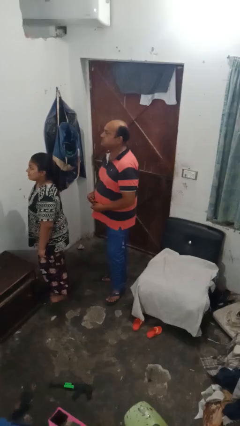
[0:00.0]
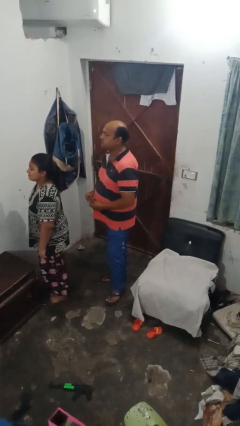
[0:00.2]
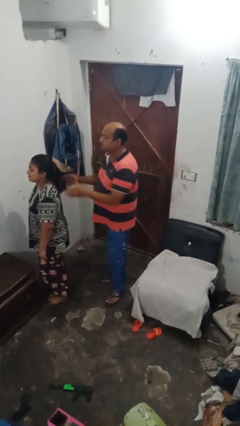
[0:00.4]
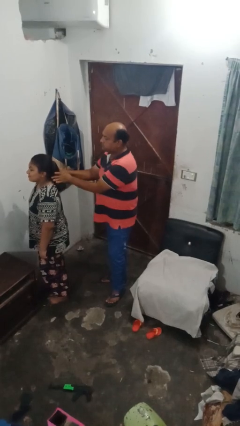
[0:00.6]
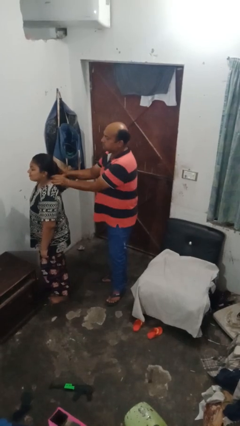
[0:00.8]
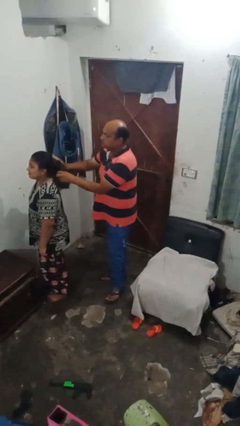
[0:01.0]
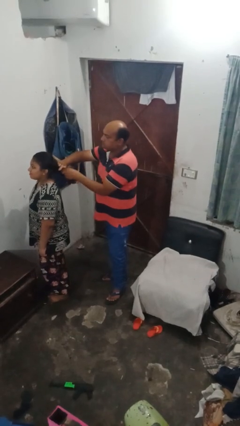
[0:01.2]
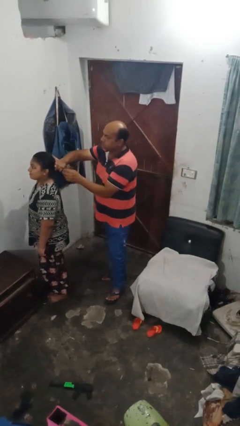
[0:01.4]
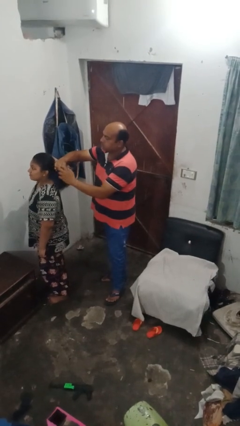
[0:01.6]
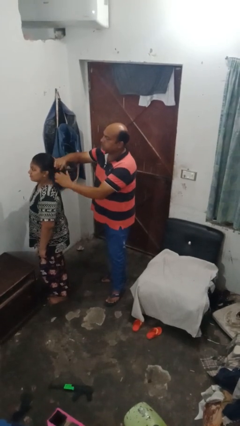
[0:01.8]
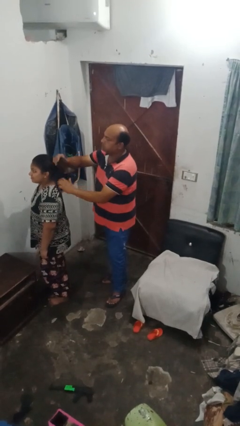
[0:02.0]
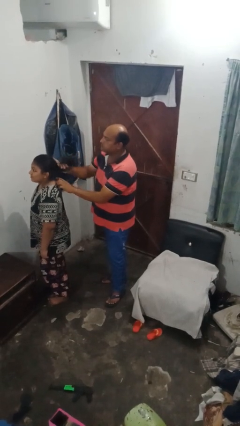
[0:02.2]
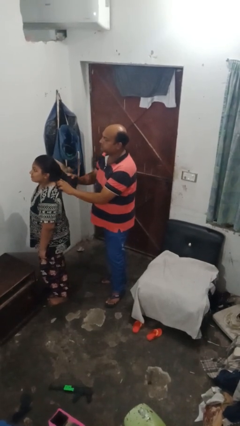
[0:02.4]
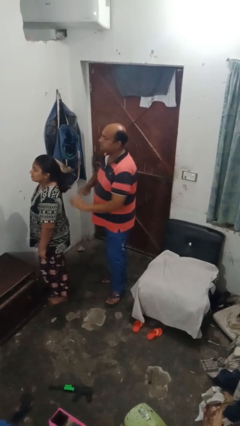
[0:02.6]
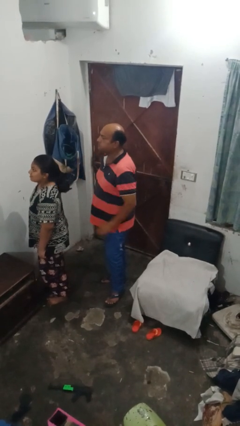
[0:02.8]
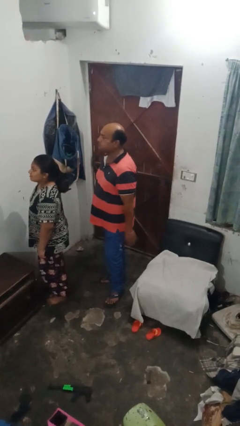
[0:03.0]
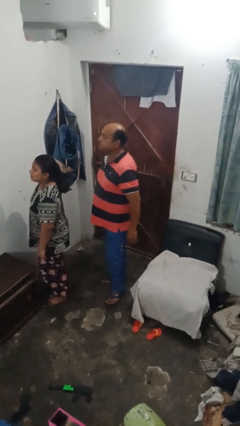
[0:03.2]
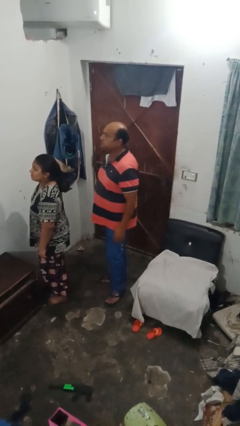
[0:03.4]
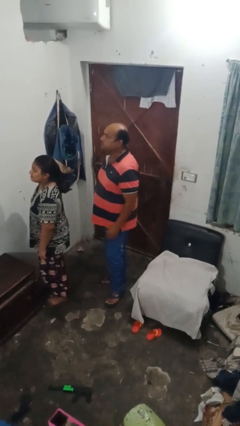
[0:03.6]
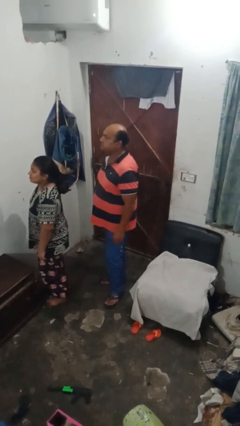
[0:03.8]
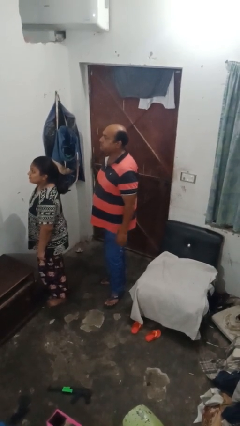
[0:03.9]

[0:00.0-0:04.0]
person braids hair of person

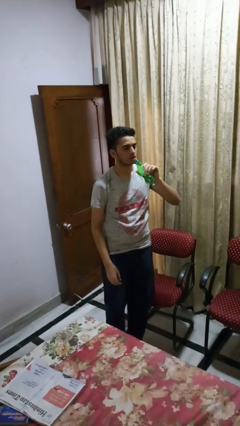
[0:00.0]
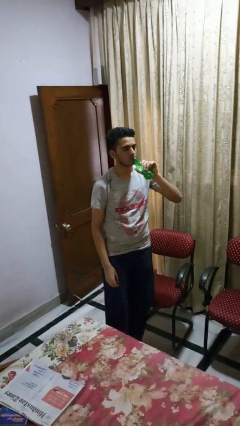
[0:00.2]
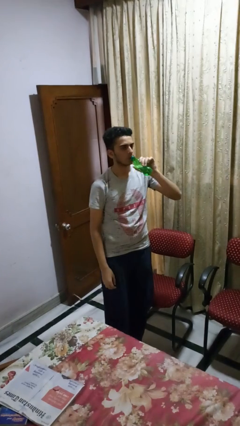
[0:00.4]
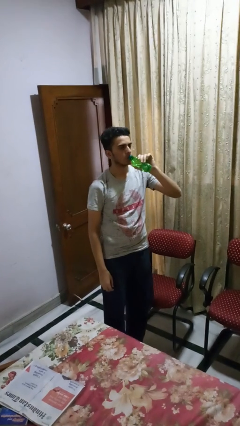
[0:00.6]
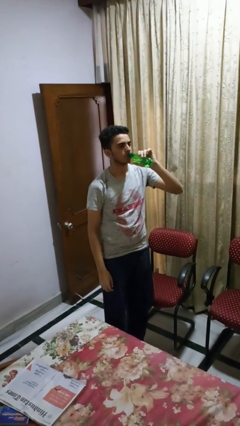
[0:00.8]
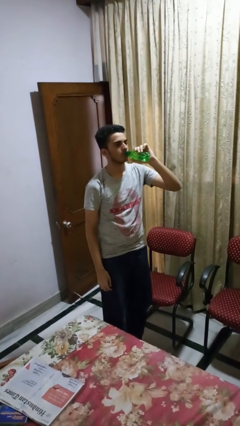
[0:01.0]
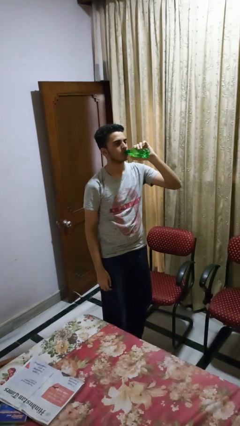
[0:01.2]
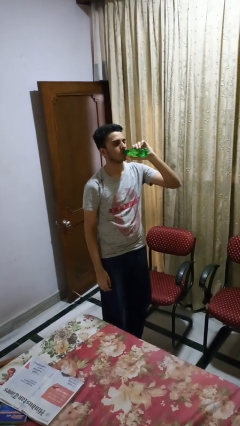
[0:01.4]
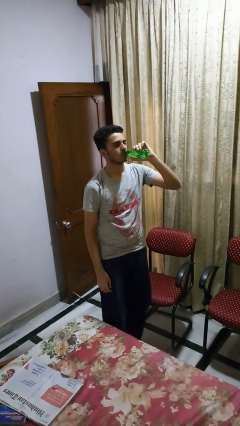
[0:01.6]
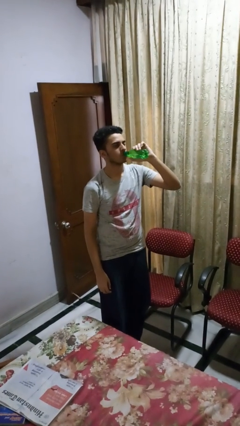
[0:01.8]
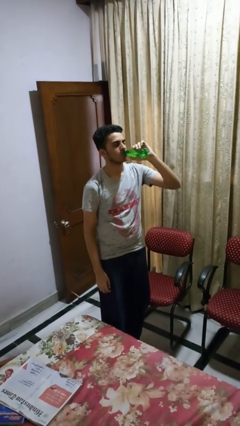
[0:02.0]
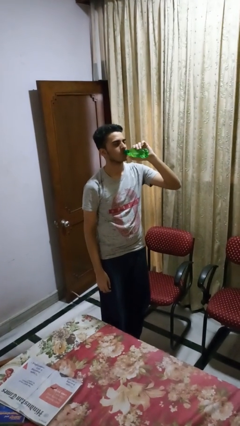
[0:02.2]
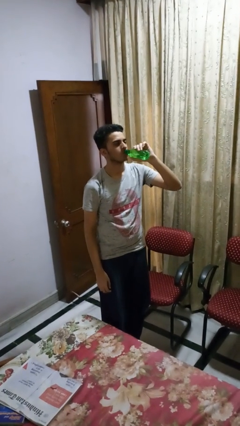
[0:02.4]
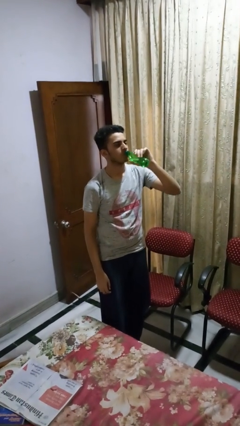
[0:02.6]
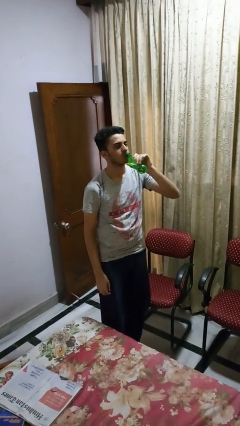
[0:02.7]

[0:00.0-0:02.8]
person drinks from bottle

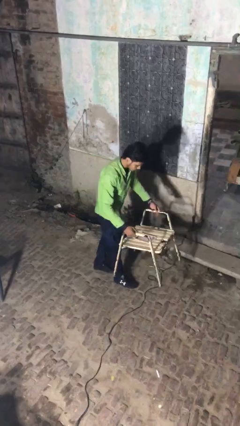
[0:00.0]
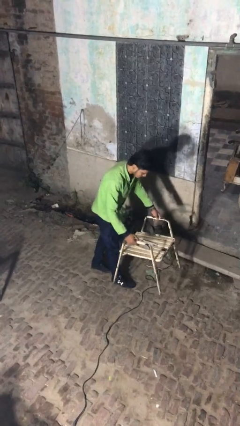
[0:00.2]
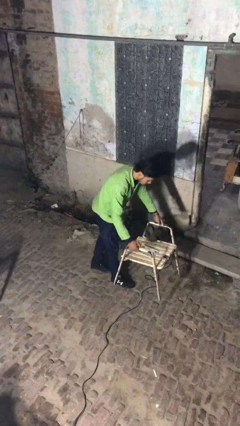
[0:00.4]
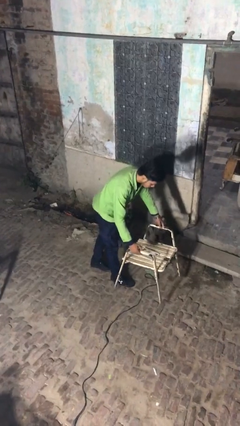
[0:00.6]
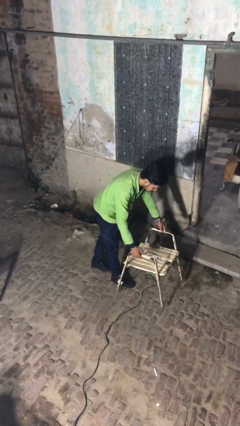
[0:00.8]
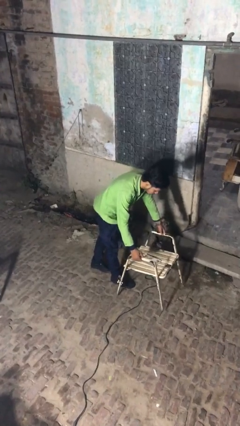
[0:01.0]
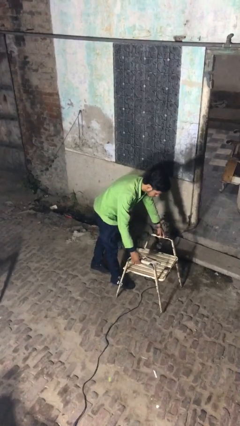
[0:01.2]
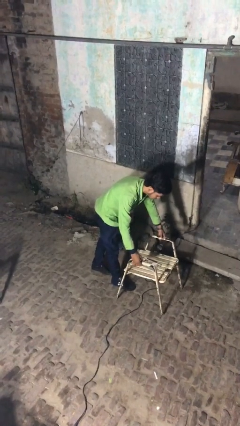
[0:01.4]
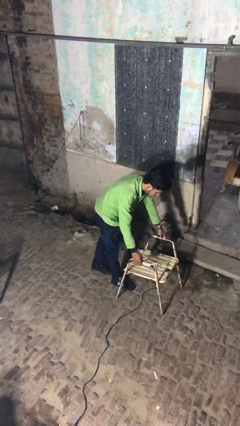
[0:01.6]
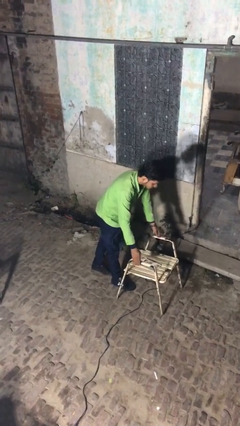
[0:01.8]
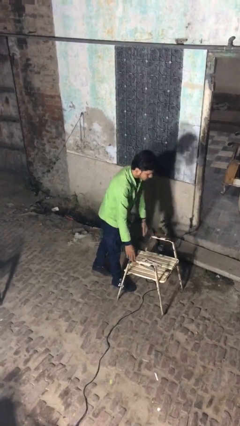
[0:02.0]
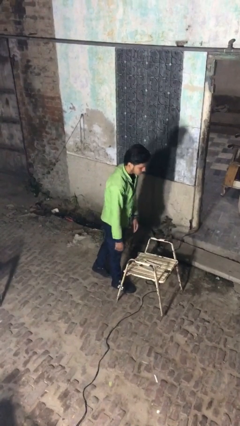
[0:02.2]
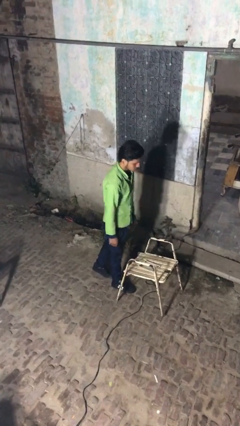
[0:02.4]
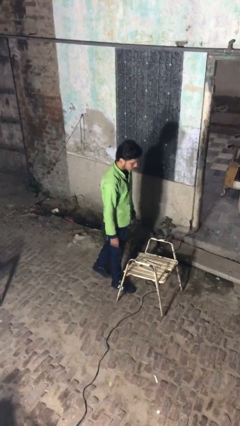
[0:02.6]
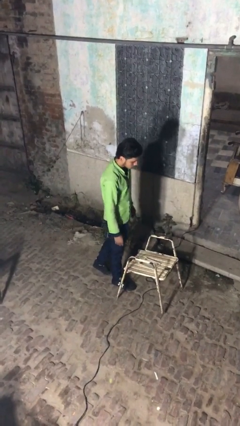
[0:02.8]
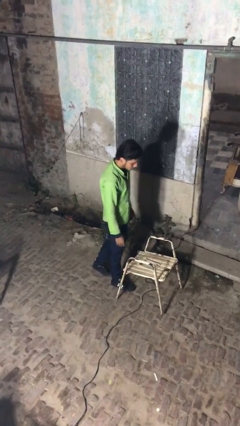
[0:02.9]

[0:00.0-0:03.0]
person puts down object on floor

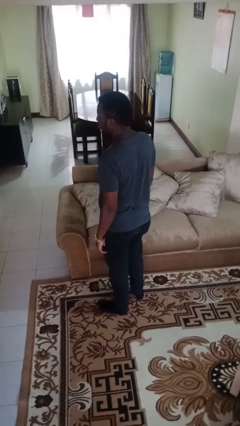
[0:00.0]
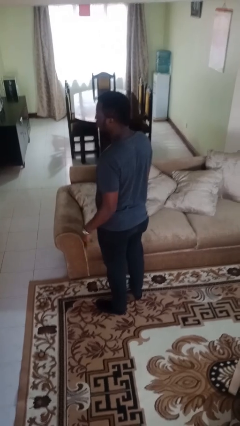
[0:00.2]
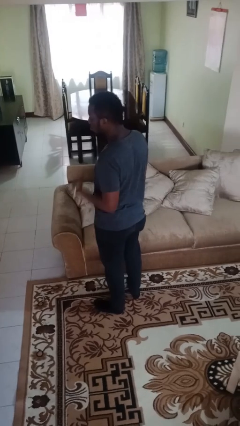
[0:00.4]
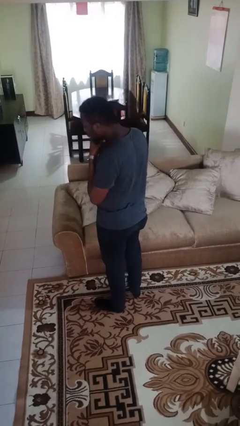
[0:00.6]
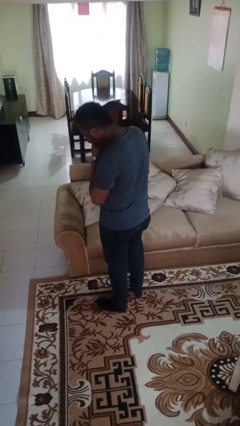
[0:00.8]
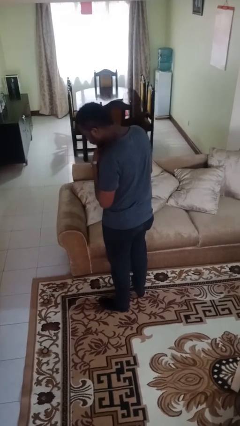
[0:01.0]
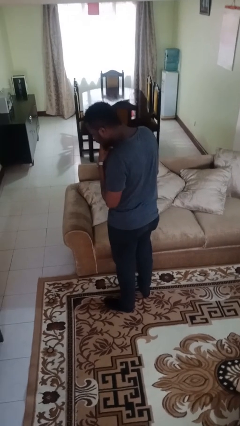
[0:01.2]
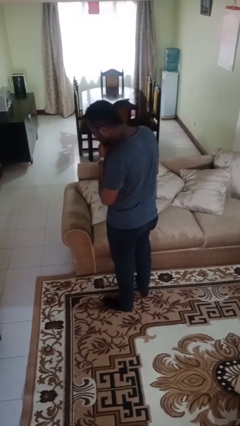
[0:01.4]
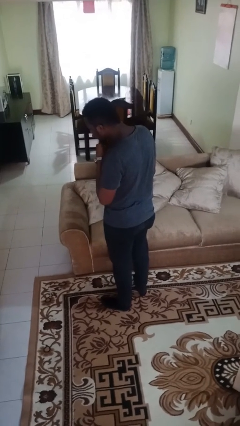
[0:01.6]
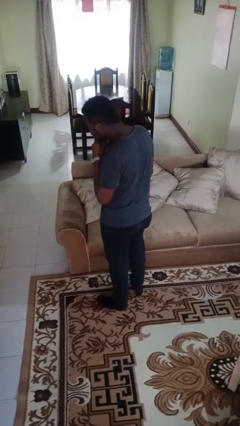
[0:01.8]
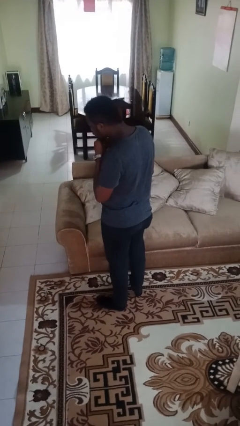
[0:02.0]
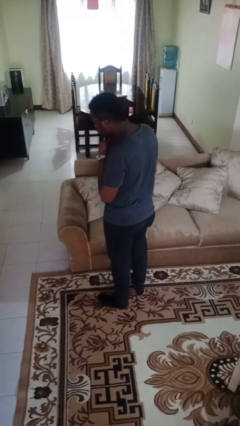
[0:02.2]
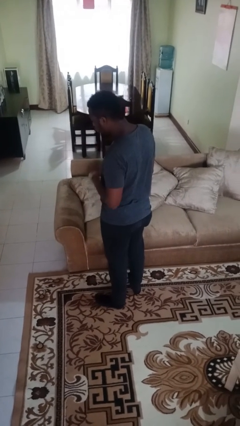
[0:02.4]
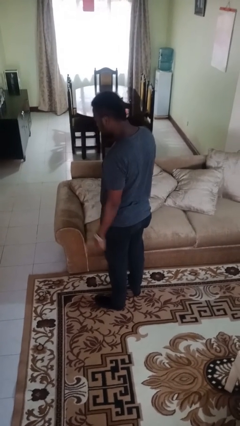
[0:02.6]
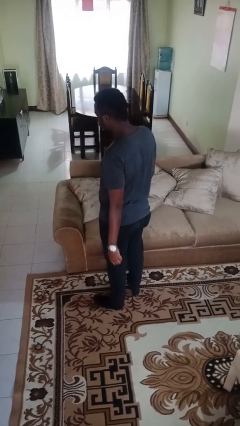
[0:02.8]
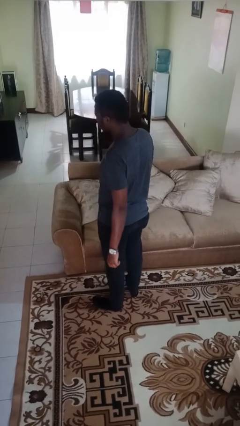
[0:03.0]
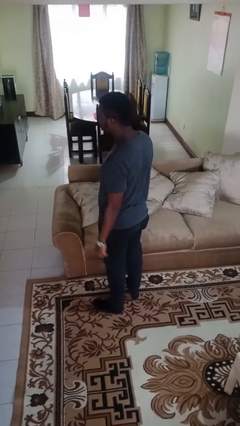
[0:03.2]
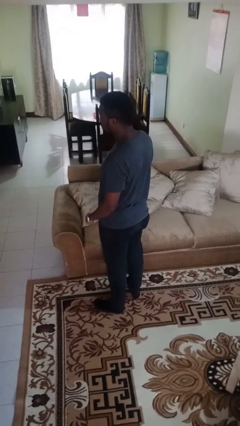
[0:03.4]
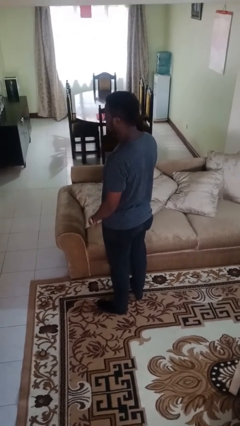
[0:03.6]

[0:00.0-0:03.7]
person strokes chin

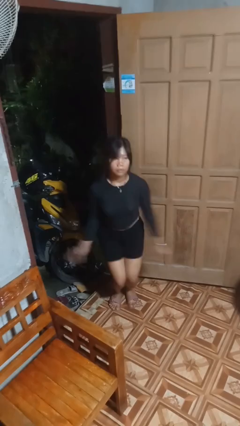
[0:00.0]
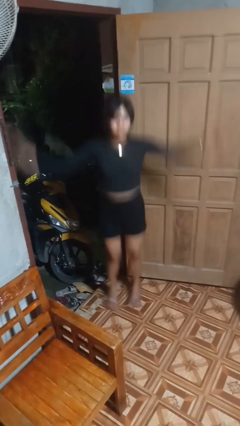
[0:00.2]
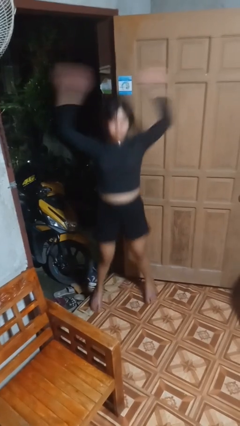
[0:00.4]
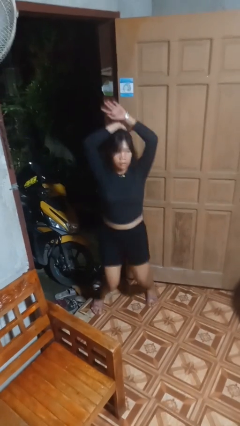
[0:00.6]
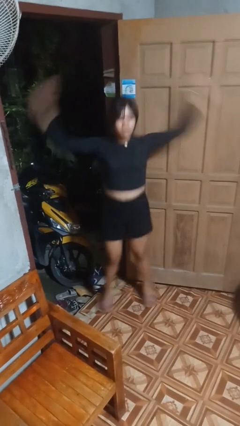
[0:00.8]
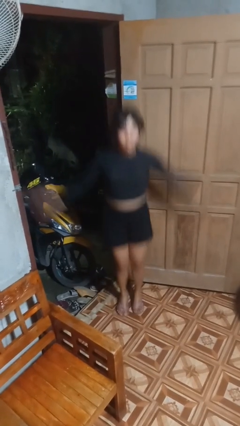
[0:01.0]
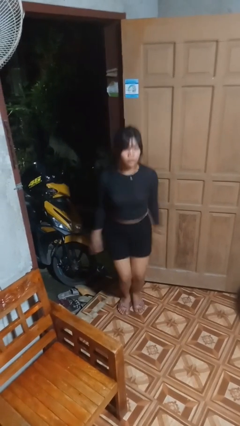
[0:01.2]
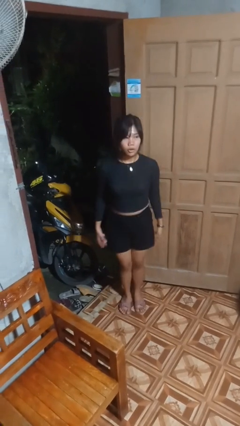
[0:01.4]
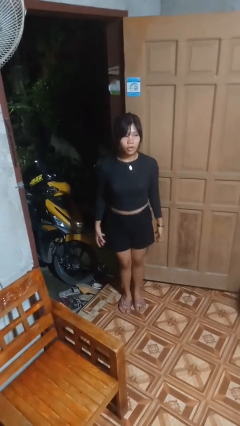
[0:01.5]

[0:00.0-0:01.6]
person exercises with jumping jacks

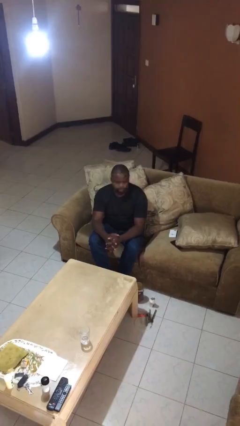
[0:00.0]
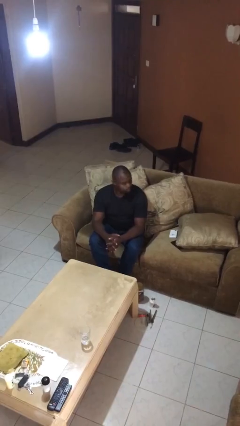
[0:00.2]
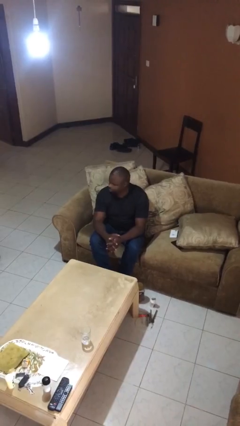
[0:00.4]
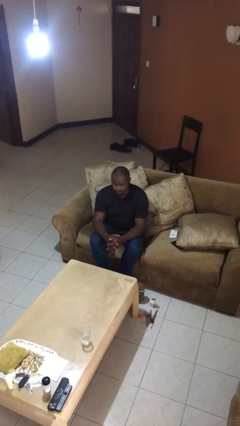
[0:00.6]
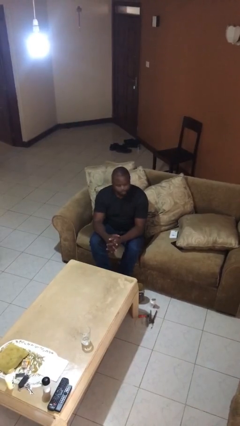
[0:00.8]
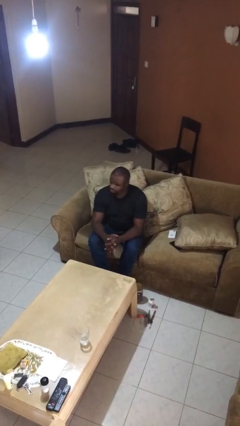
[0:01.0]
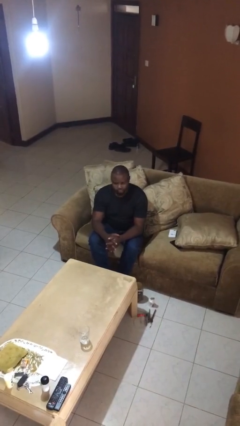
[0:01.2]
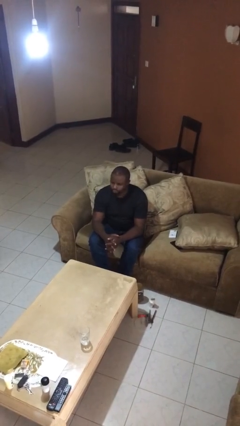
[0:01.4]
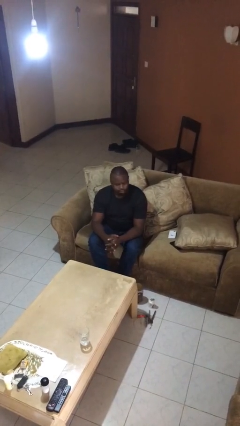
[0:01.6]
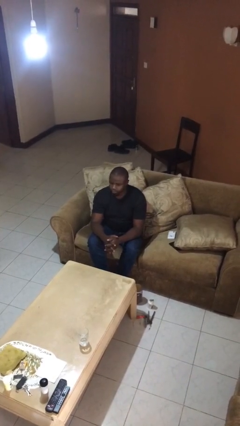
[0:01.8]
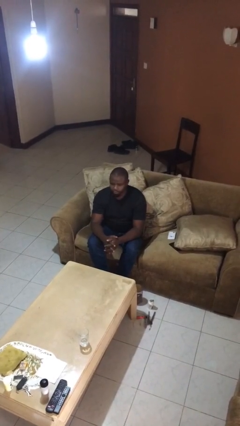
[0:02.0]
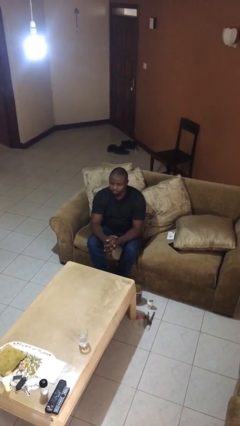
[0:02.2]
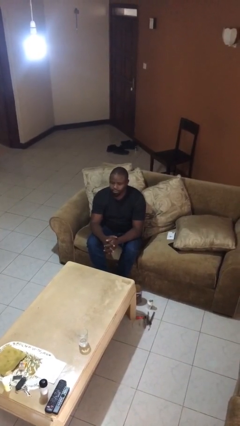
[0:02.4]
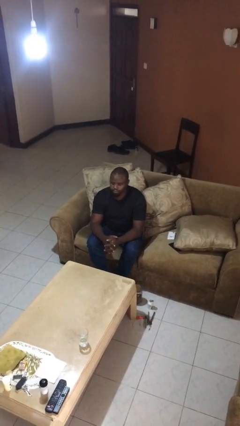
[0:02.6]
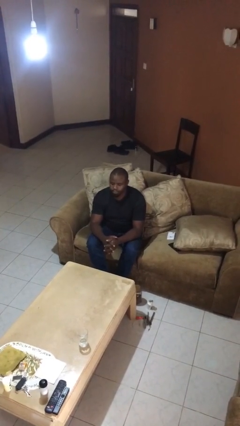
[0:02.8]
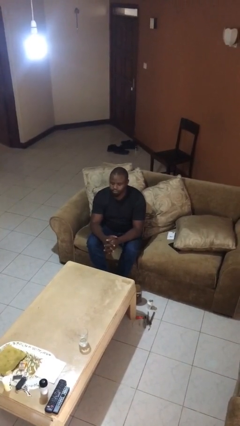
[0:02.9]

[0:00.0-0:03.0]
person shakes head
